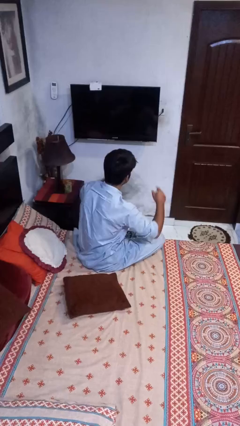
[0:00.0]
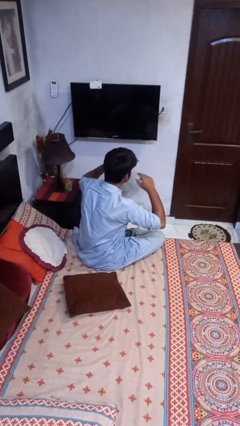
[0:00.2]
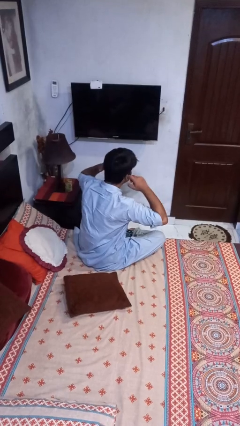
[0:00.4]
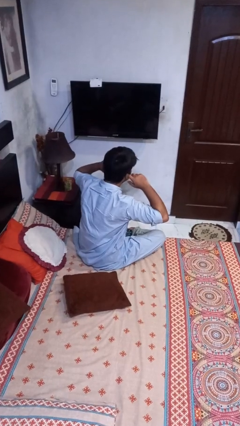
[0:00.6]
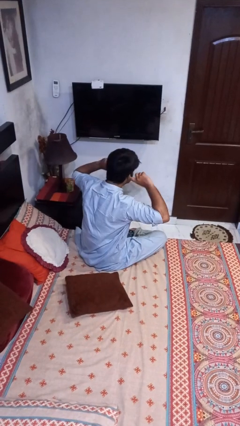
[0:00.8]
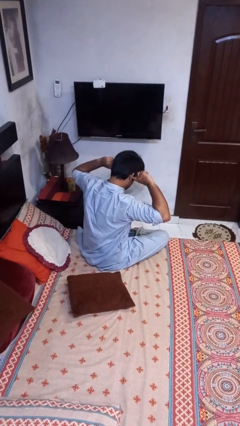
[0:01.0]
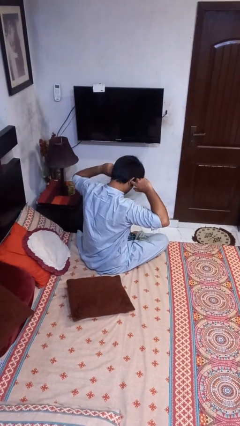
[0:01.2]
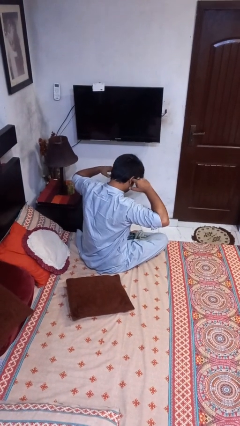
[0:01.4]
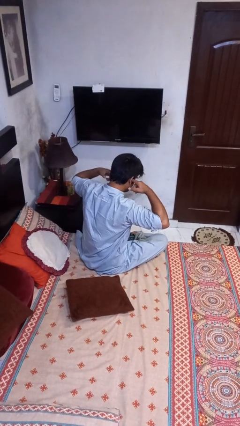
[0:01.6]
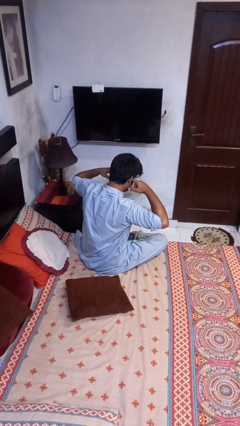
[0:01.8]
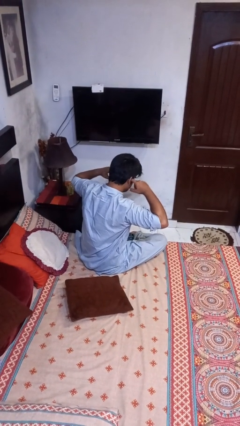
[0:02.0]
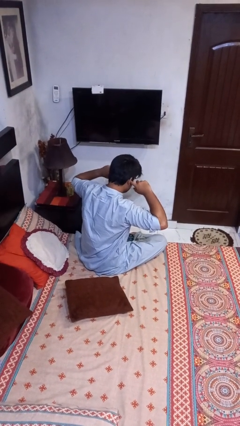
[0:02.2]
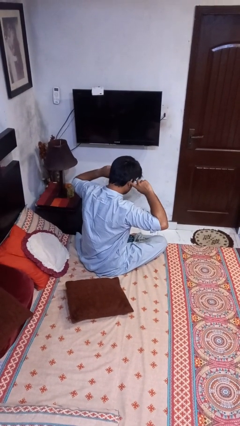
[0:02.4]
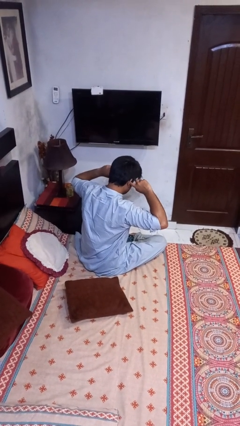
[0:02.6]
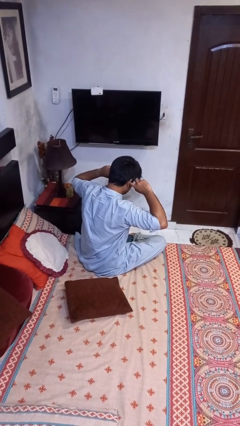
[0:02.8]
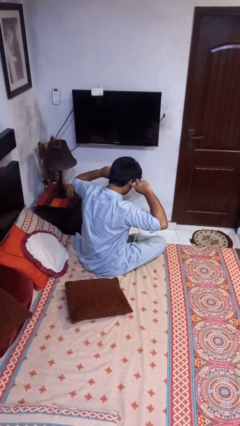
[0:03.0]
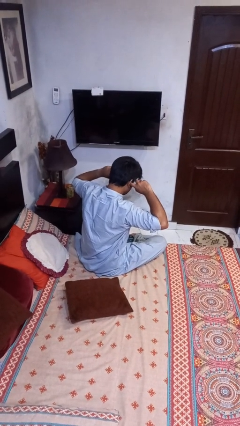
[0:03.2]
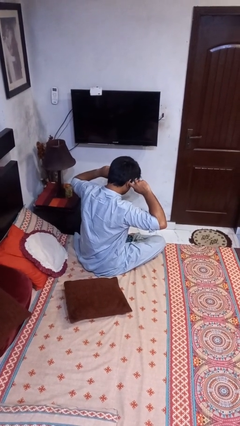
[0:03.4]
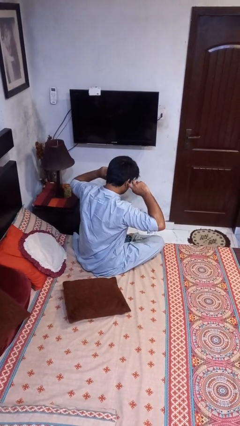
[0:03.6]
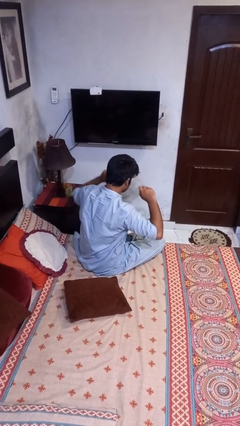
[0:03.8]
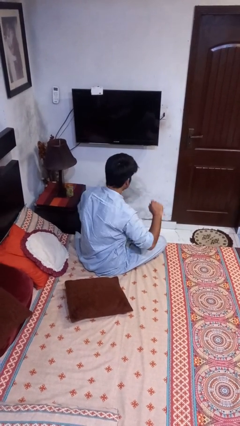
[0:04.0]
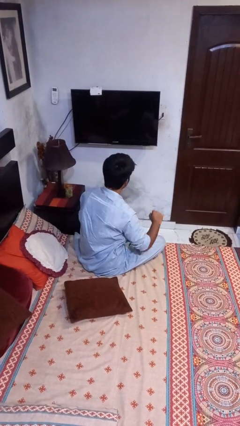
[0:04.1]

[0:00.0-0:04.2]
person puts fingers in ear

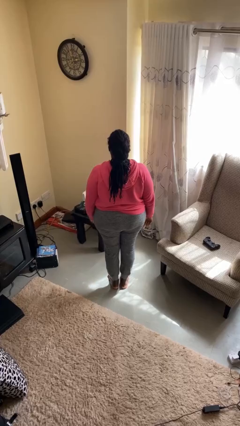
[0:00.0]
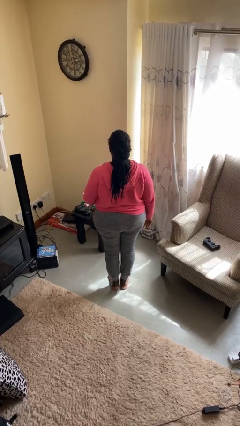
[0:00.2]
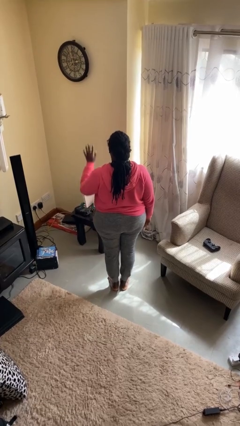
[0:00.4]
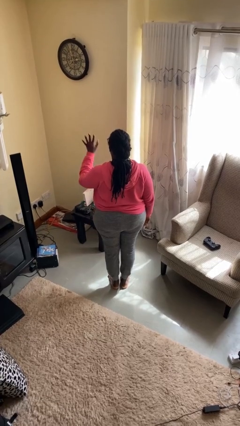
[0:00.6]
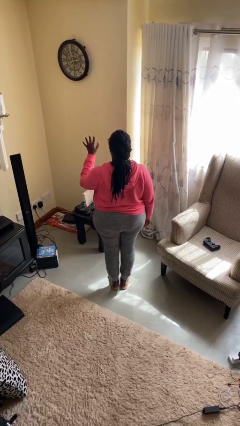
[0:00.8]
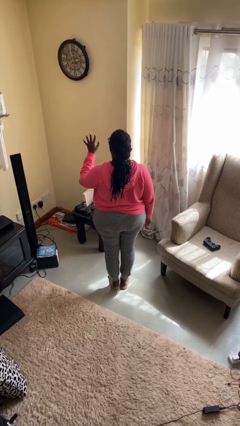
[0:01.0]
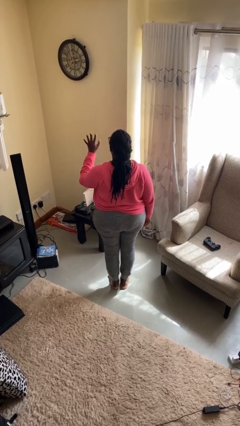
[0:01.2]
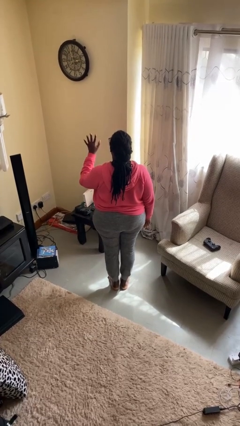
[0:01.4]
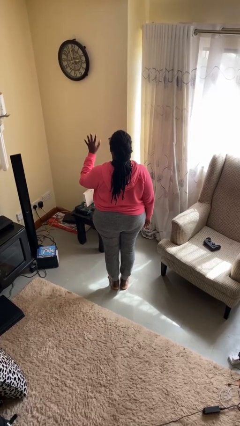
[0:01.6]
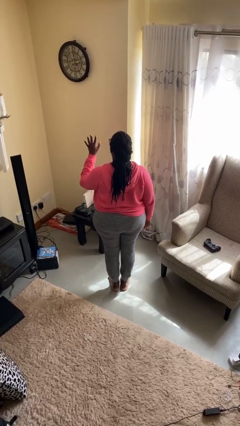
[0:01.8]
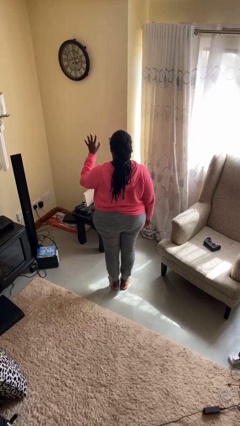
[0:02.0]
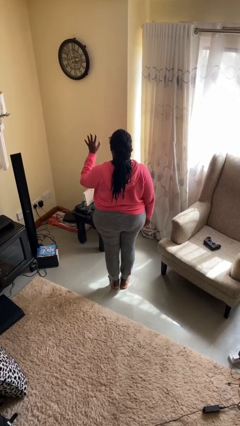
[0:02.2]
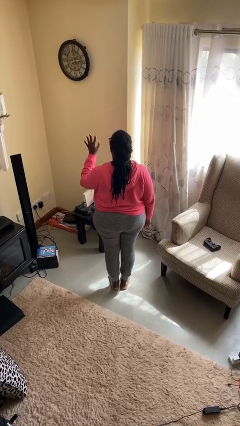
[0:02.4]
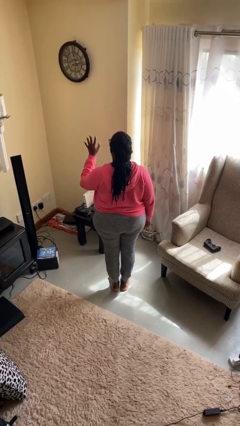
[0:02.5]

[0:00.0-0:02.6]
person gestures number five

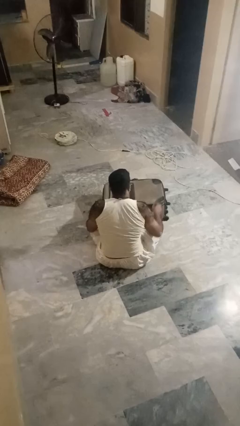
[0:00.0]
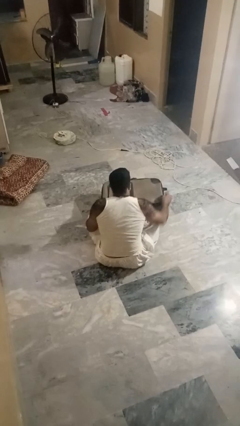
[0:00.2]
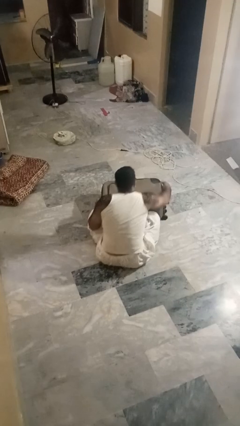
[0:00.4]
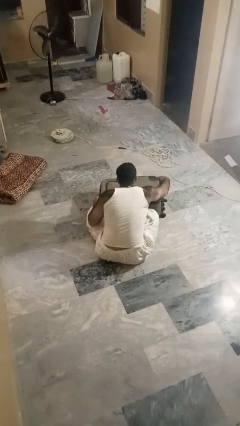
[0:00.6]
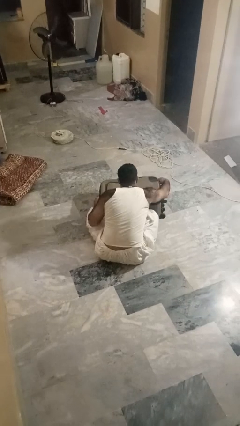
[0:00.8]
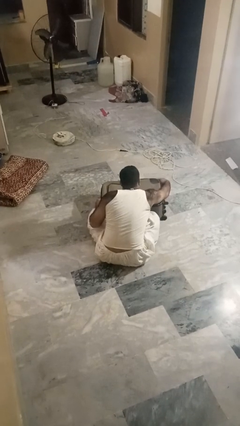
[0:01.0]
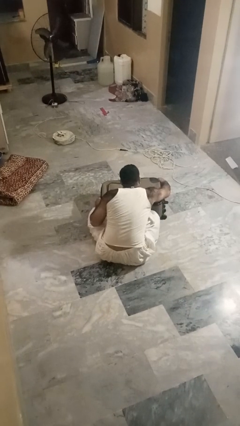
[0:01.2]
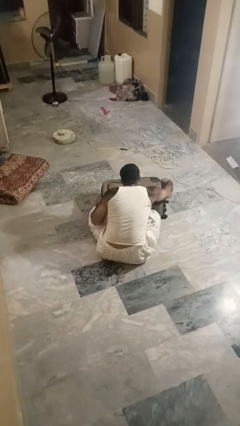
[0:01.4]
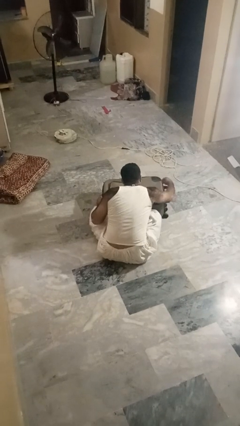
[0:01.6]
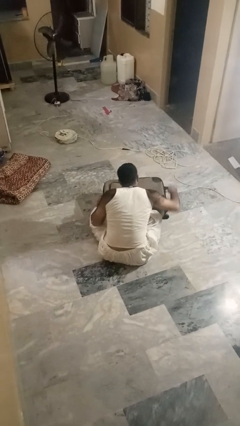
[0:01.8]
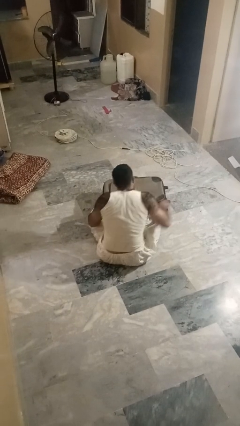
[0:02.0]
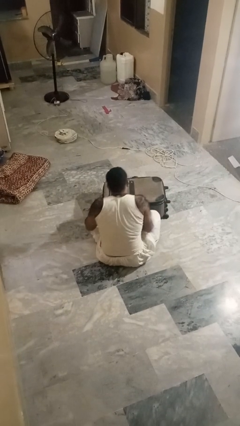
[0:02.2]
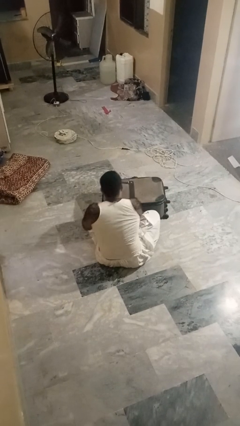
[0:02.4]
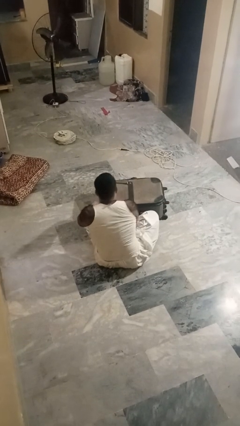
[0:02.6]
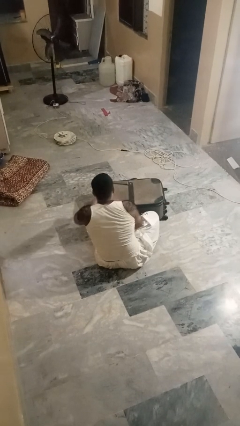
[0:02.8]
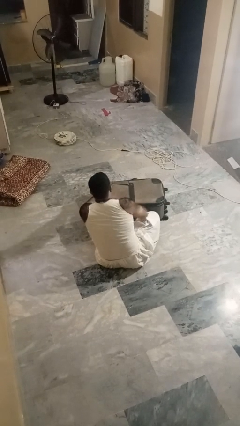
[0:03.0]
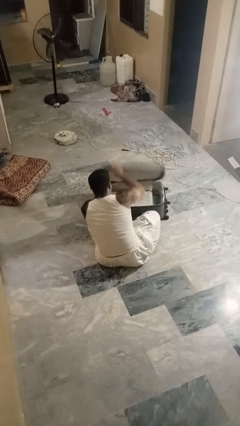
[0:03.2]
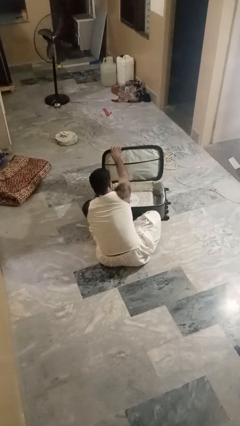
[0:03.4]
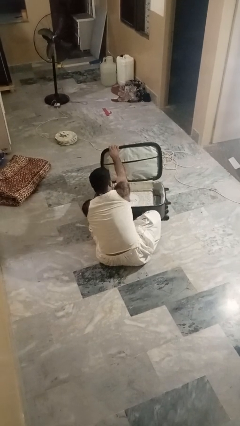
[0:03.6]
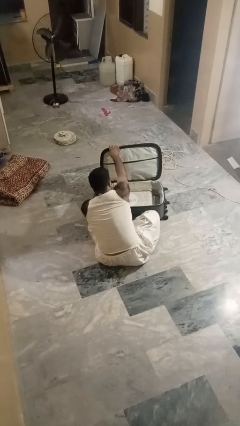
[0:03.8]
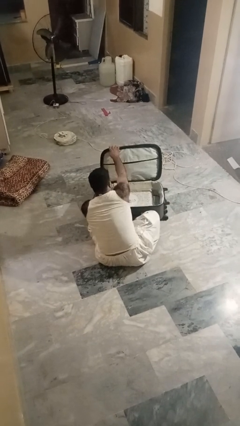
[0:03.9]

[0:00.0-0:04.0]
person opens suitcase

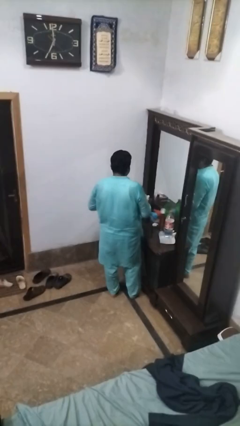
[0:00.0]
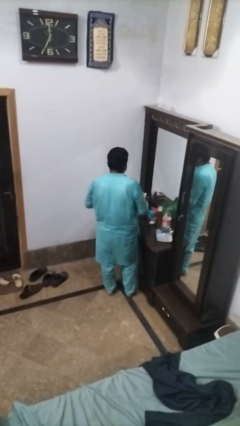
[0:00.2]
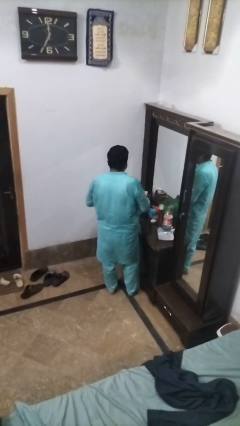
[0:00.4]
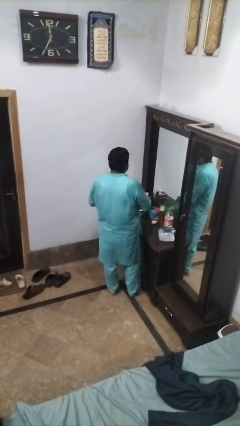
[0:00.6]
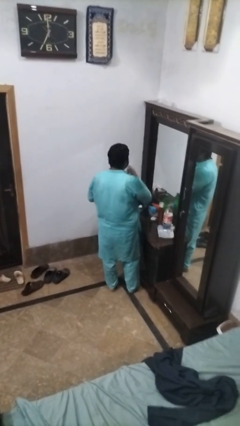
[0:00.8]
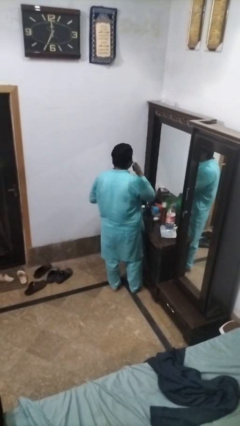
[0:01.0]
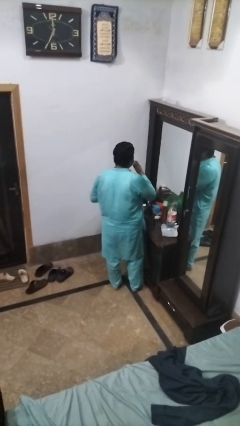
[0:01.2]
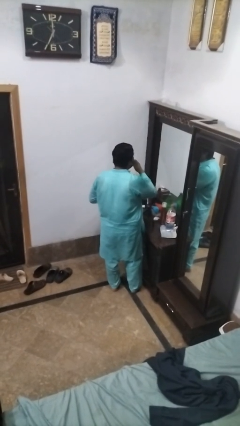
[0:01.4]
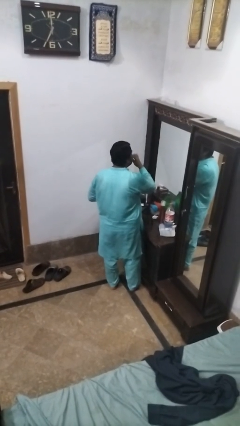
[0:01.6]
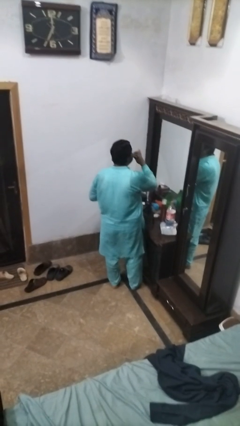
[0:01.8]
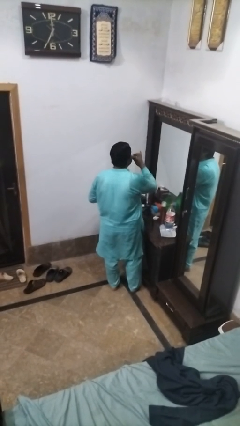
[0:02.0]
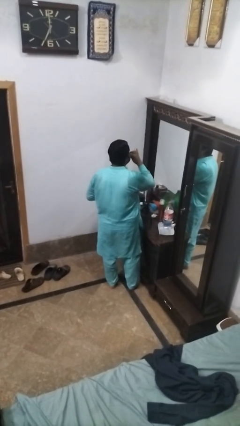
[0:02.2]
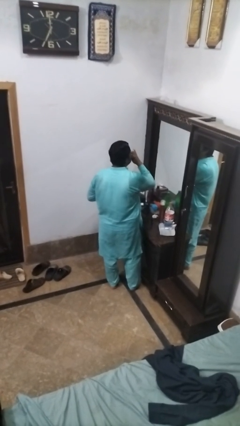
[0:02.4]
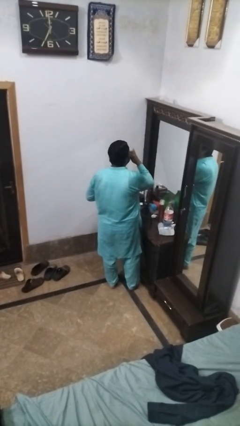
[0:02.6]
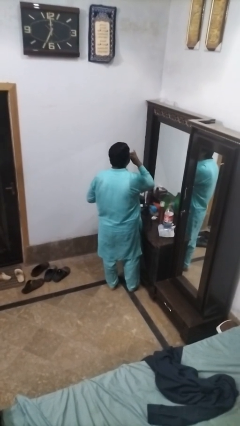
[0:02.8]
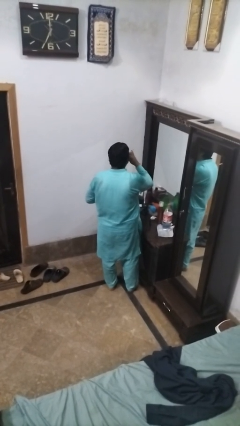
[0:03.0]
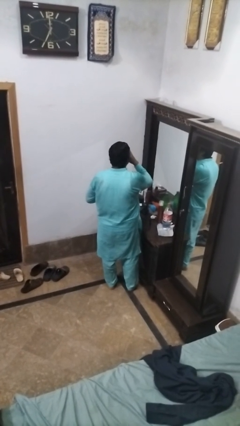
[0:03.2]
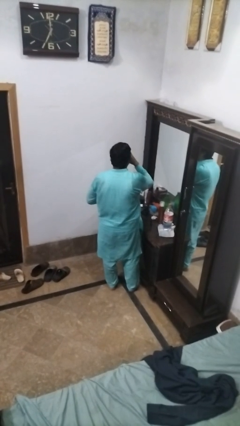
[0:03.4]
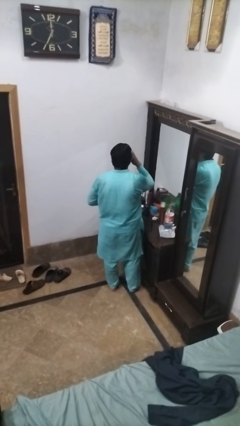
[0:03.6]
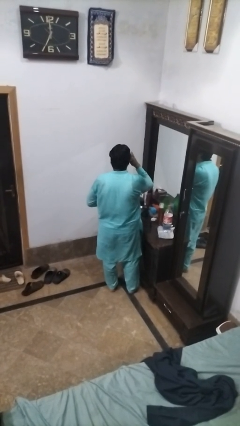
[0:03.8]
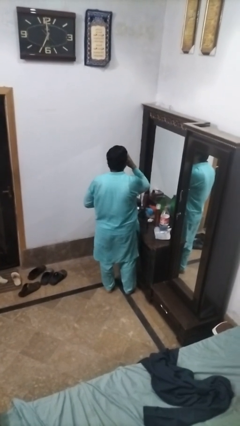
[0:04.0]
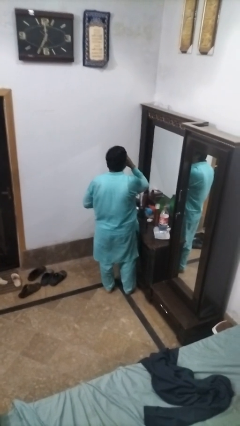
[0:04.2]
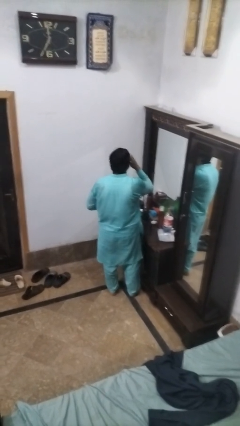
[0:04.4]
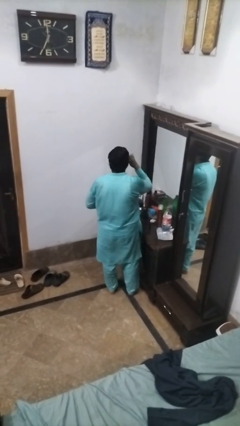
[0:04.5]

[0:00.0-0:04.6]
person applies lip makeup

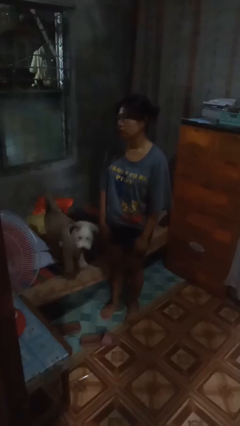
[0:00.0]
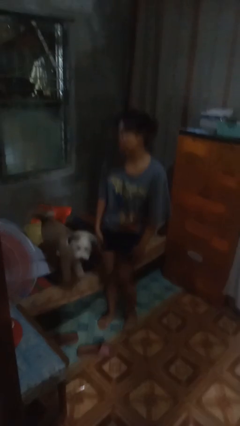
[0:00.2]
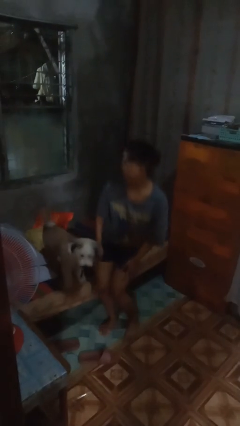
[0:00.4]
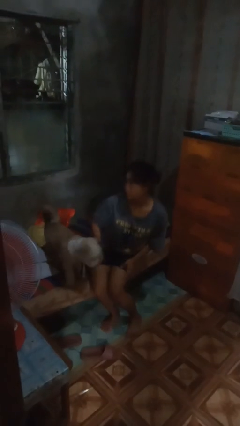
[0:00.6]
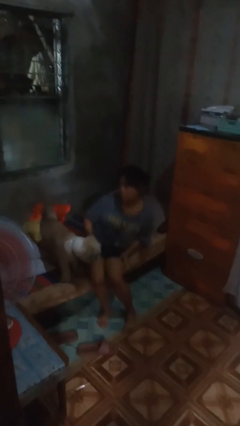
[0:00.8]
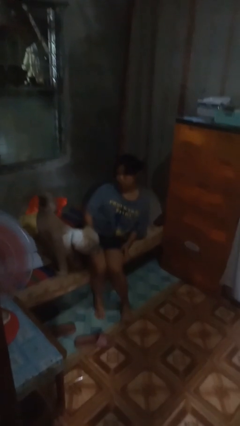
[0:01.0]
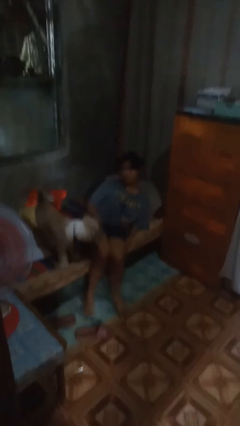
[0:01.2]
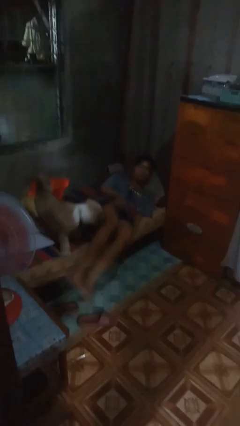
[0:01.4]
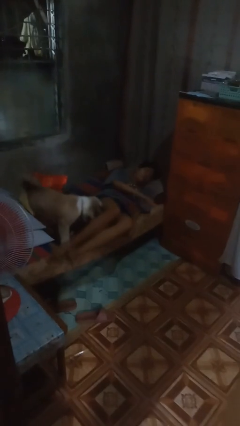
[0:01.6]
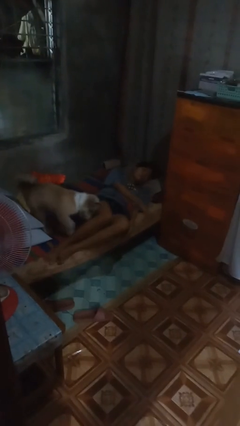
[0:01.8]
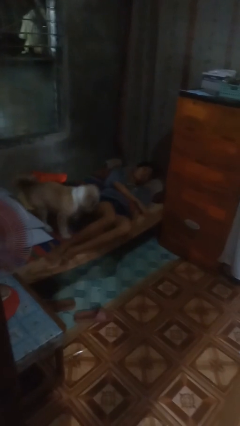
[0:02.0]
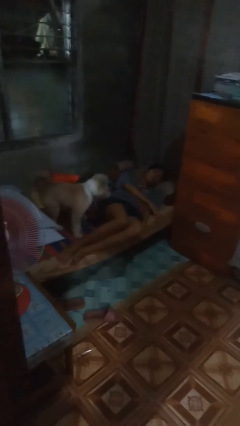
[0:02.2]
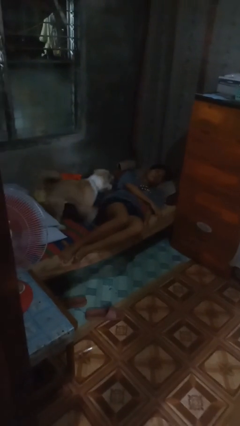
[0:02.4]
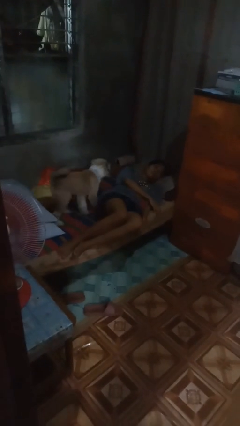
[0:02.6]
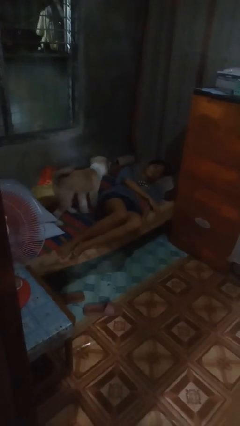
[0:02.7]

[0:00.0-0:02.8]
person lies down on bed
